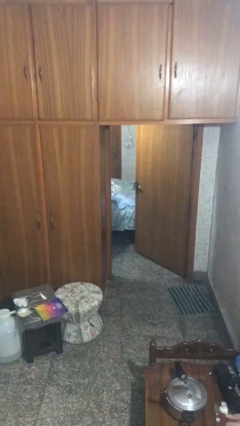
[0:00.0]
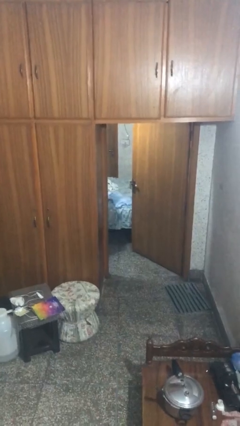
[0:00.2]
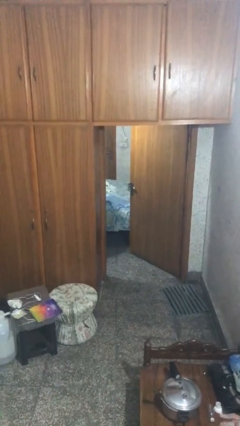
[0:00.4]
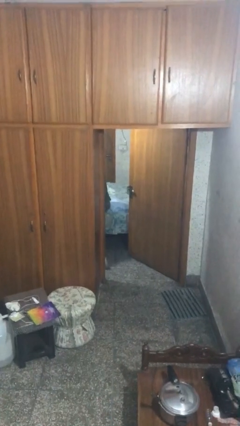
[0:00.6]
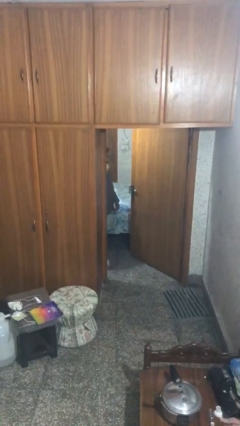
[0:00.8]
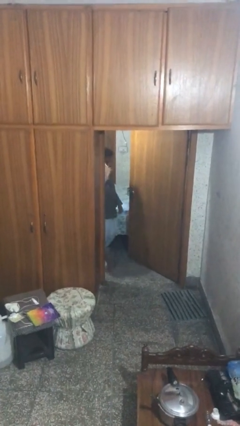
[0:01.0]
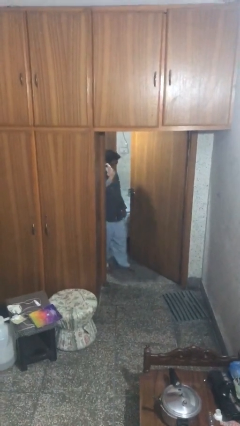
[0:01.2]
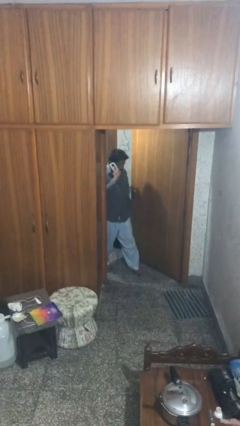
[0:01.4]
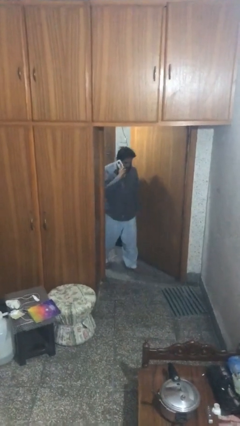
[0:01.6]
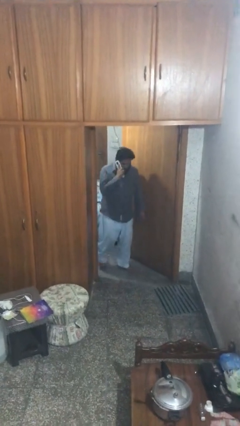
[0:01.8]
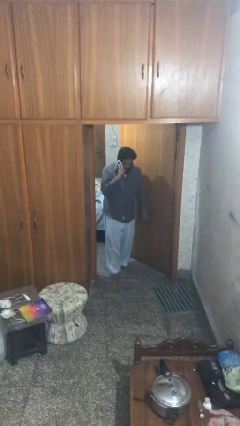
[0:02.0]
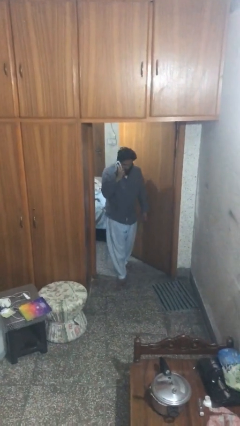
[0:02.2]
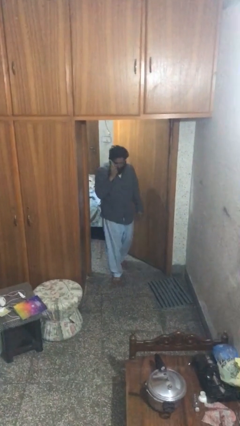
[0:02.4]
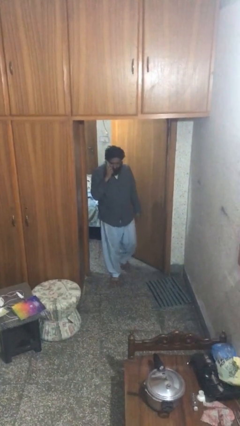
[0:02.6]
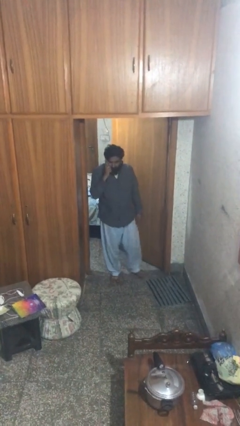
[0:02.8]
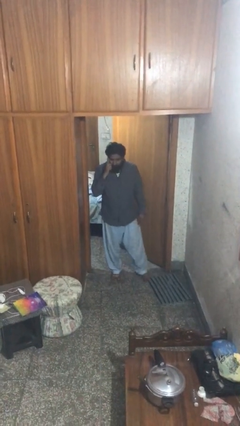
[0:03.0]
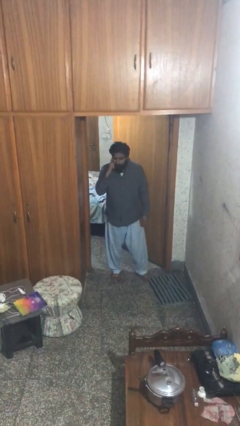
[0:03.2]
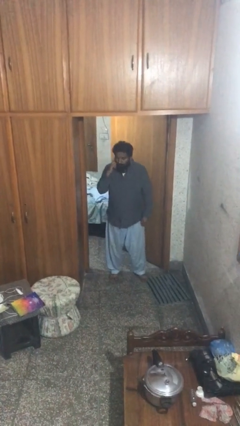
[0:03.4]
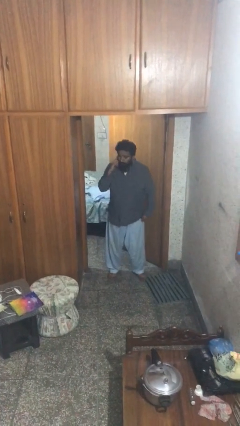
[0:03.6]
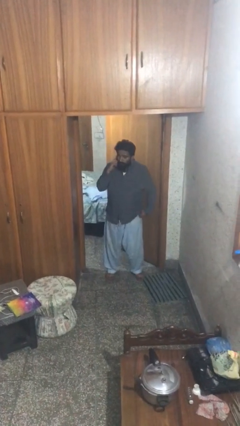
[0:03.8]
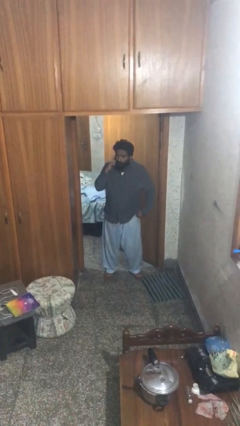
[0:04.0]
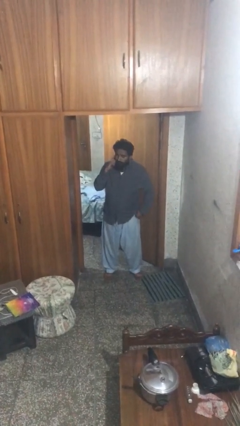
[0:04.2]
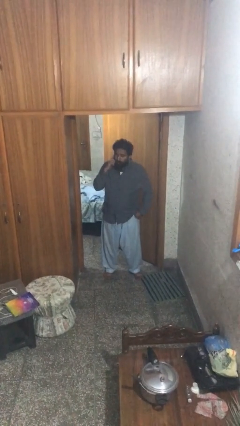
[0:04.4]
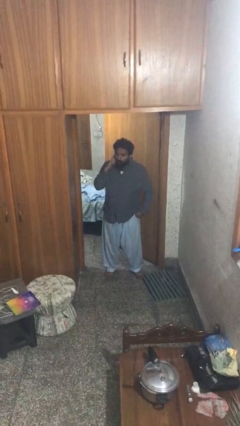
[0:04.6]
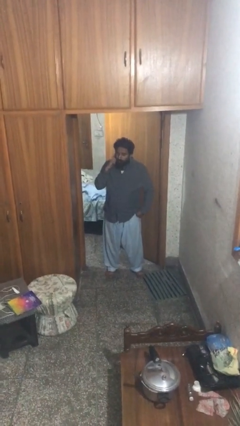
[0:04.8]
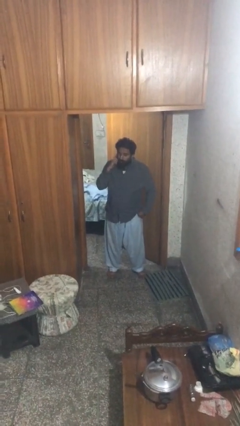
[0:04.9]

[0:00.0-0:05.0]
person enters scene through structure

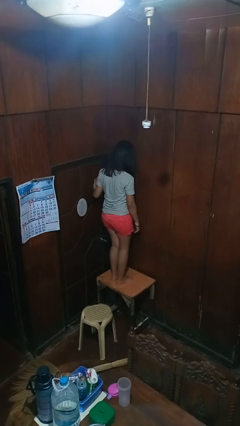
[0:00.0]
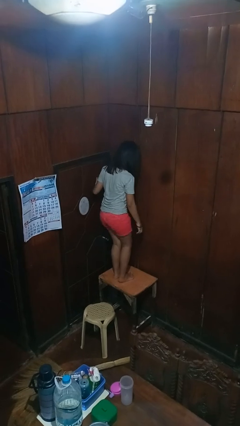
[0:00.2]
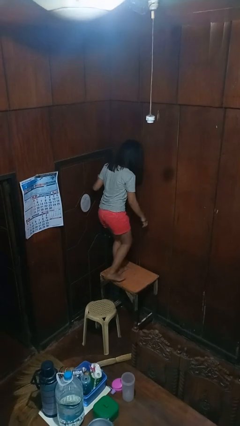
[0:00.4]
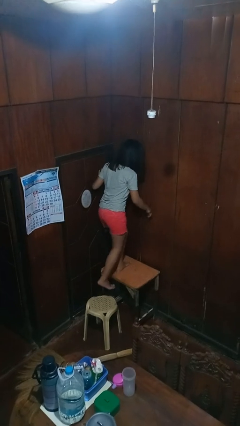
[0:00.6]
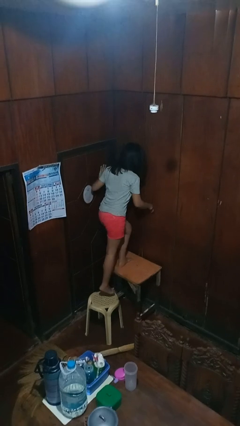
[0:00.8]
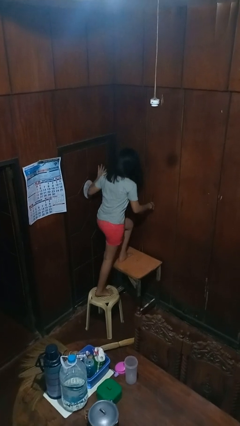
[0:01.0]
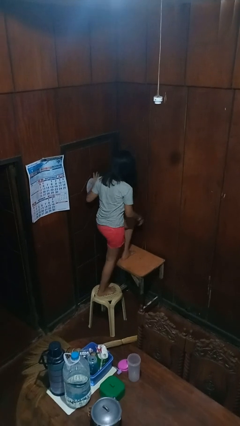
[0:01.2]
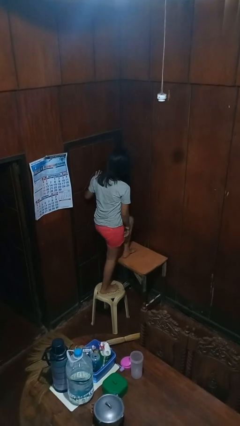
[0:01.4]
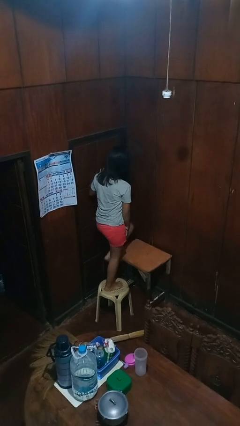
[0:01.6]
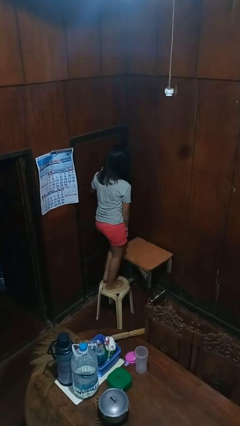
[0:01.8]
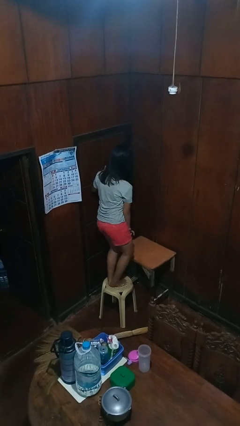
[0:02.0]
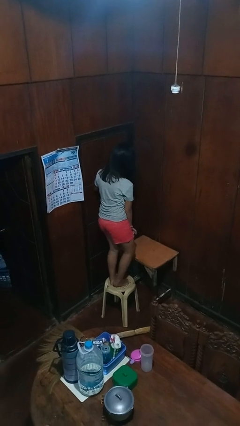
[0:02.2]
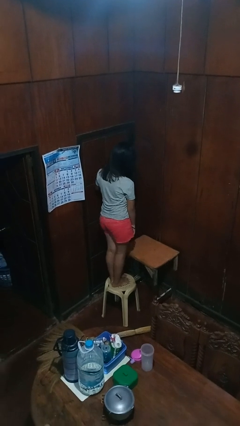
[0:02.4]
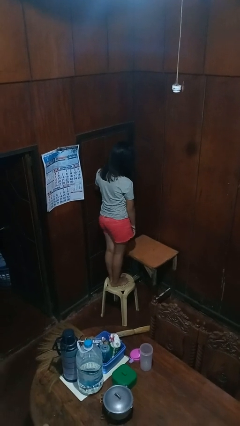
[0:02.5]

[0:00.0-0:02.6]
person climbs off table

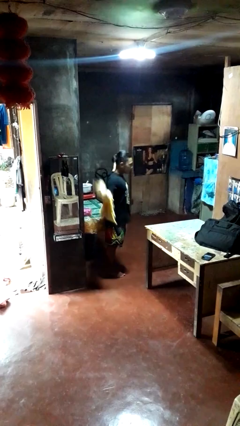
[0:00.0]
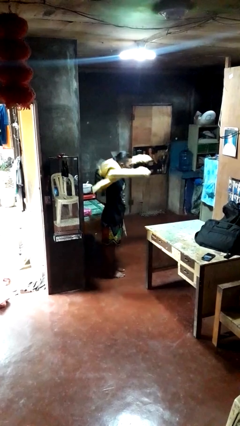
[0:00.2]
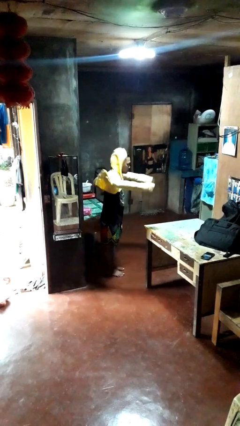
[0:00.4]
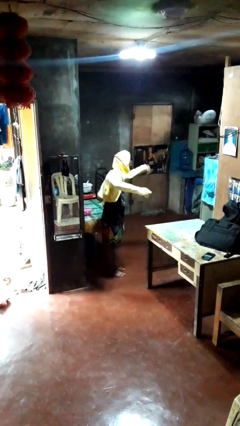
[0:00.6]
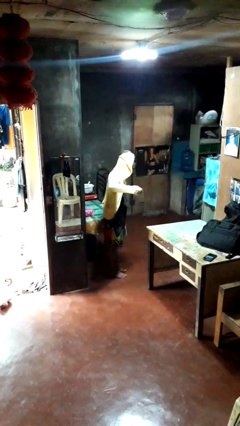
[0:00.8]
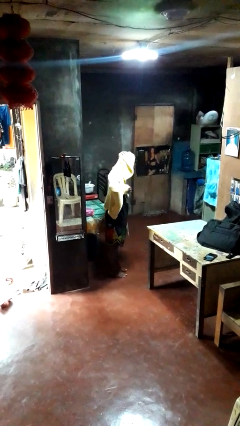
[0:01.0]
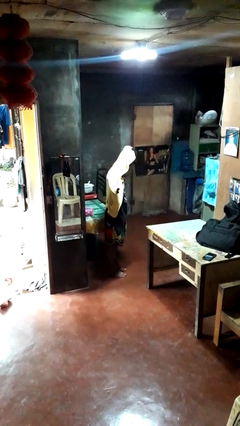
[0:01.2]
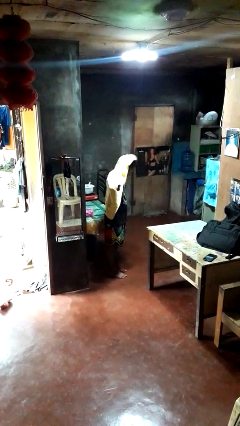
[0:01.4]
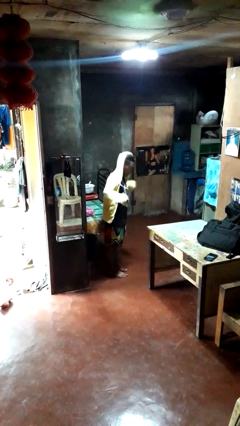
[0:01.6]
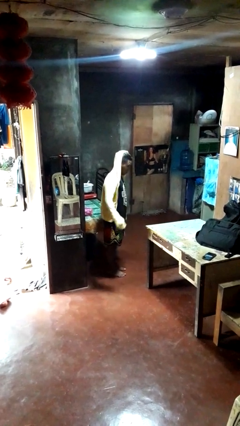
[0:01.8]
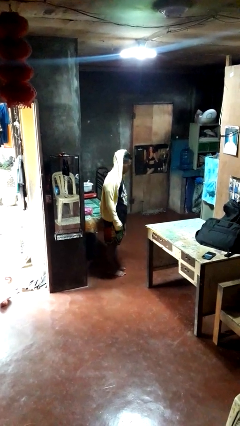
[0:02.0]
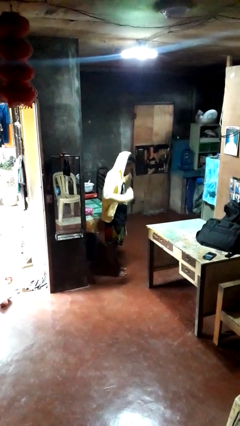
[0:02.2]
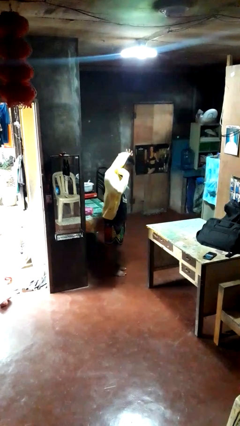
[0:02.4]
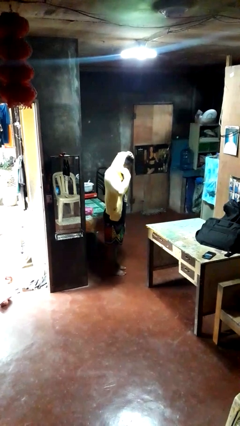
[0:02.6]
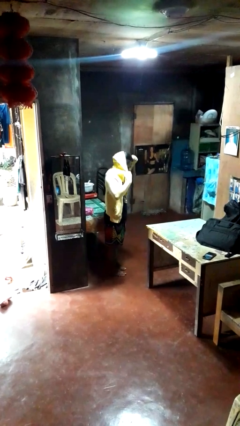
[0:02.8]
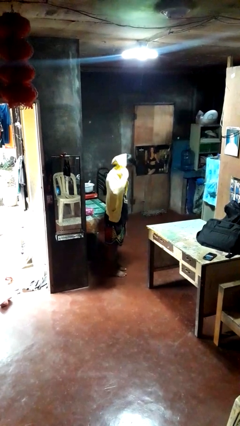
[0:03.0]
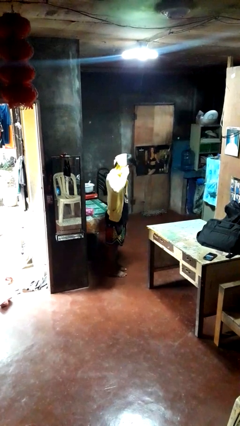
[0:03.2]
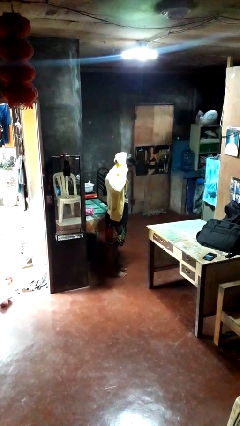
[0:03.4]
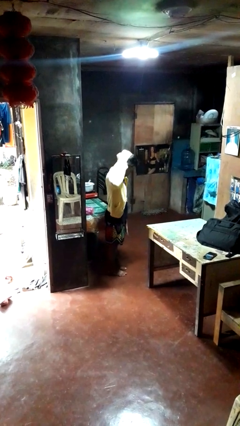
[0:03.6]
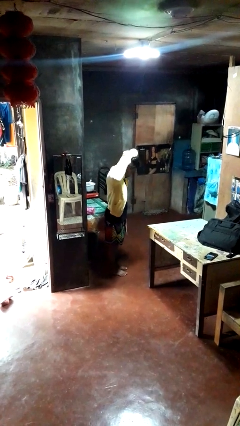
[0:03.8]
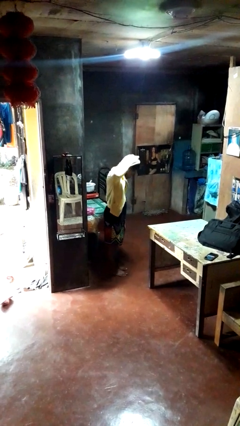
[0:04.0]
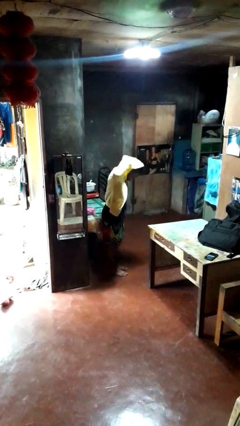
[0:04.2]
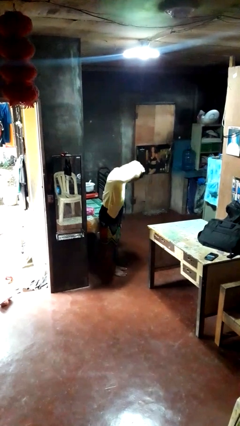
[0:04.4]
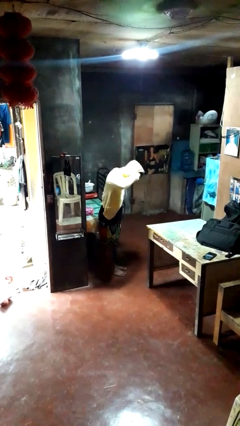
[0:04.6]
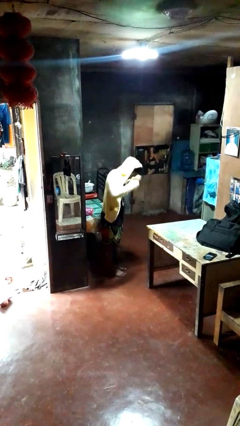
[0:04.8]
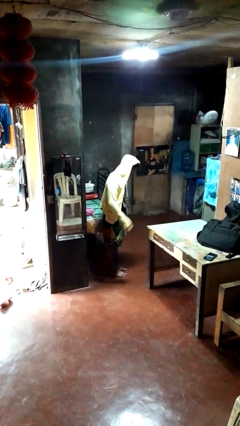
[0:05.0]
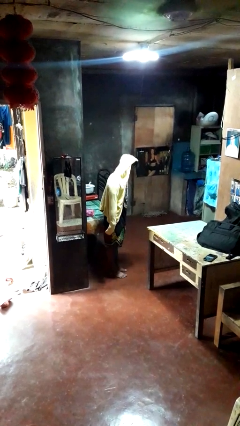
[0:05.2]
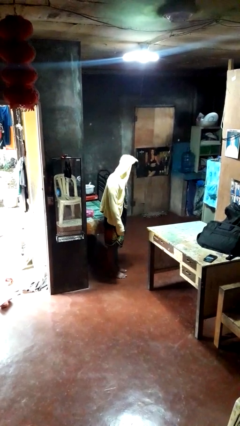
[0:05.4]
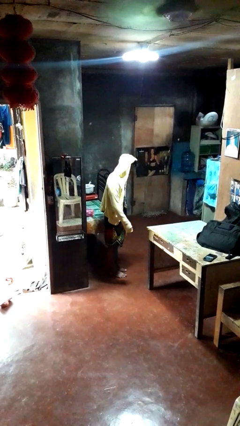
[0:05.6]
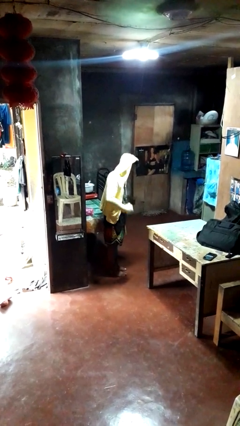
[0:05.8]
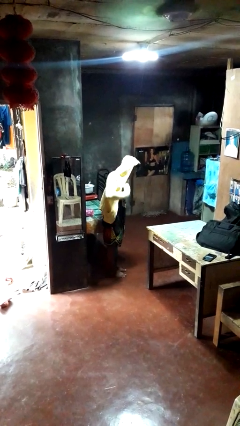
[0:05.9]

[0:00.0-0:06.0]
person puts on hoodie

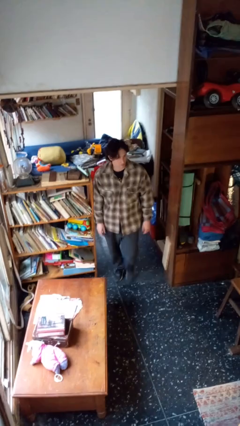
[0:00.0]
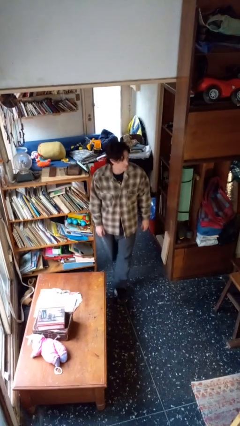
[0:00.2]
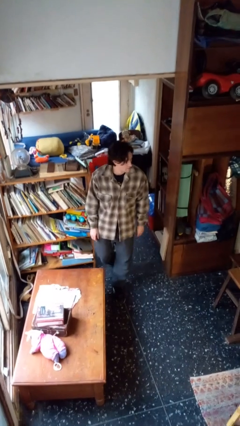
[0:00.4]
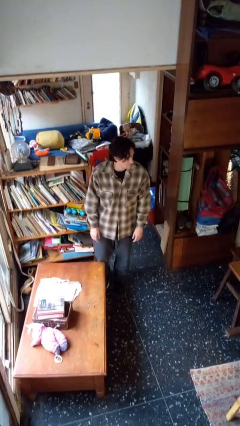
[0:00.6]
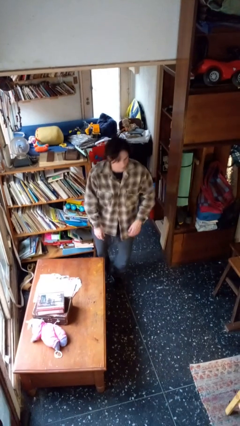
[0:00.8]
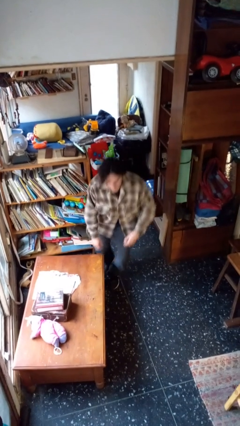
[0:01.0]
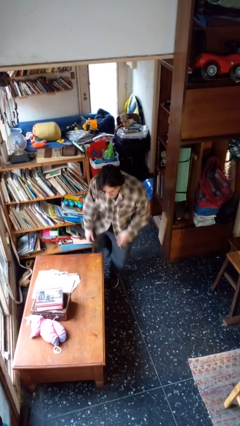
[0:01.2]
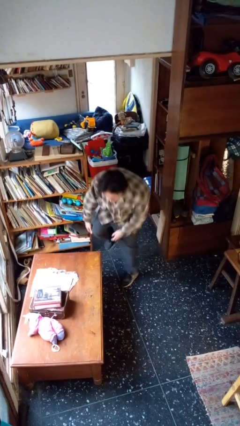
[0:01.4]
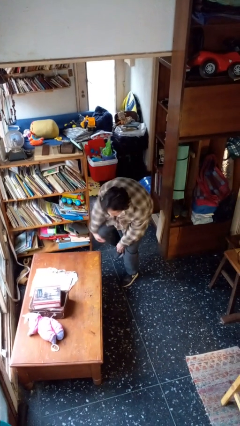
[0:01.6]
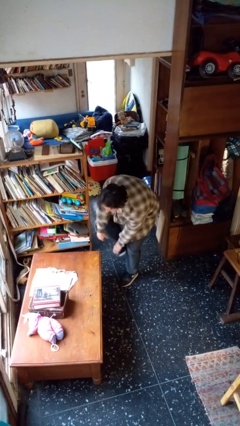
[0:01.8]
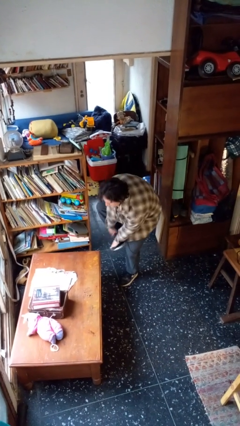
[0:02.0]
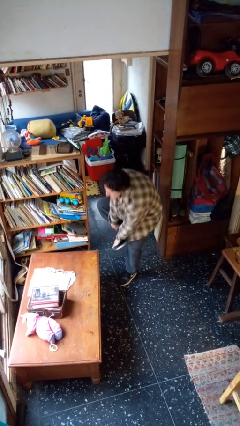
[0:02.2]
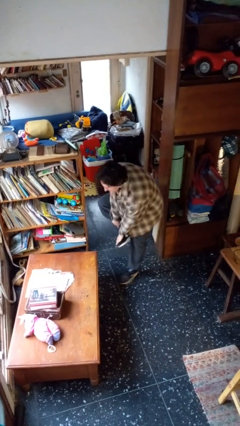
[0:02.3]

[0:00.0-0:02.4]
person bumps into table

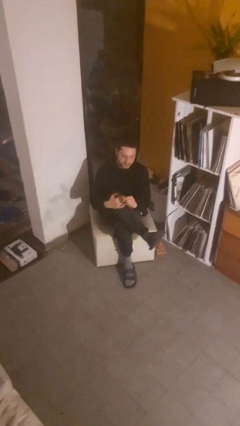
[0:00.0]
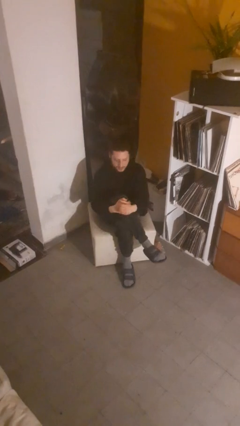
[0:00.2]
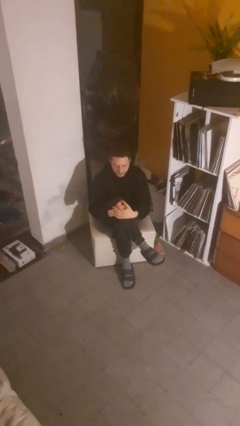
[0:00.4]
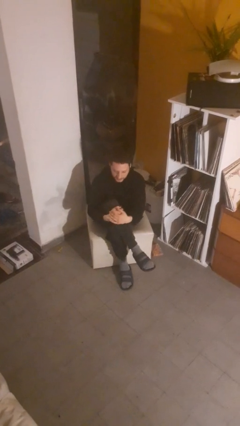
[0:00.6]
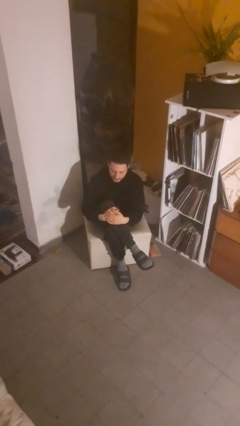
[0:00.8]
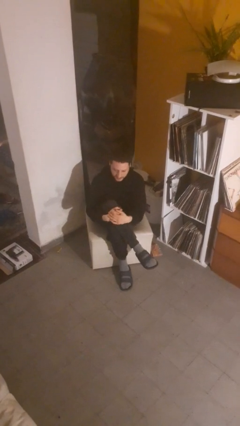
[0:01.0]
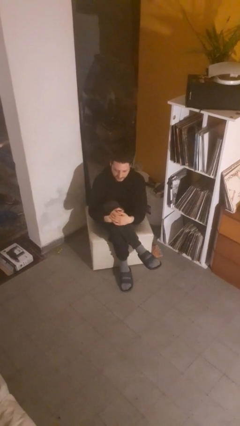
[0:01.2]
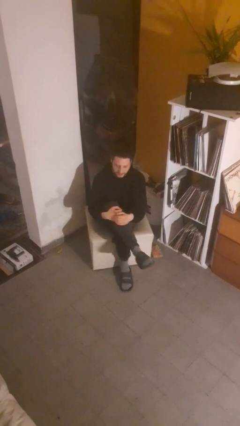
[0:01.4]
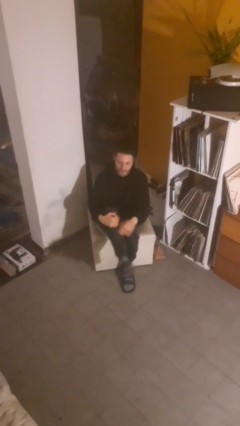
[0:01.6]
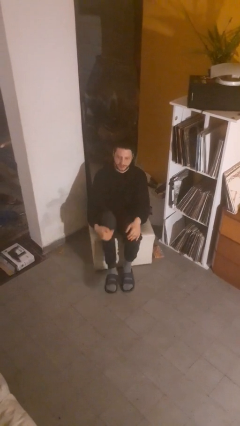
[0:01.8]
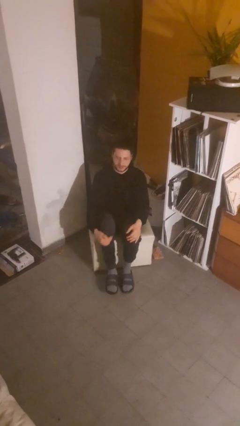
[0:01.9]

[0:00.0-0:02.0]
person crosses legs
